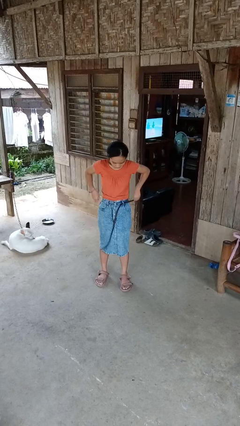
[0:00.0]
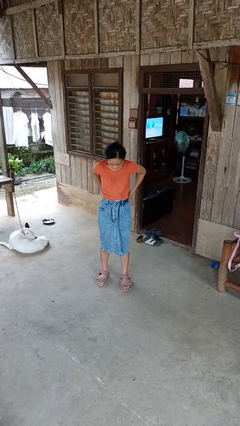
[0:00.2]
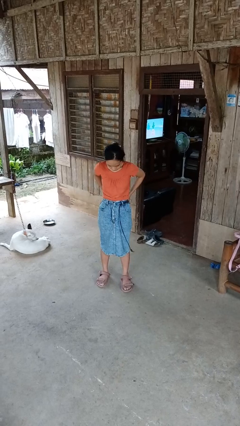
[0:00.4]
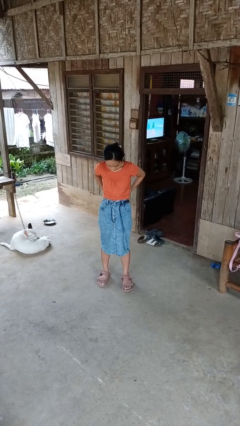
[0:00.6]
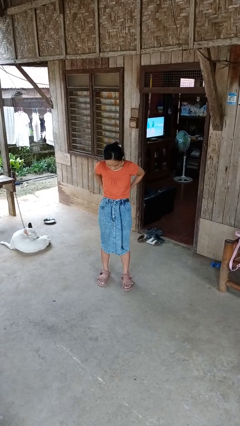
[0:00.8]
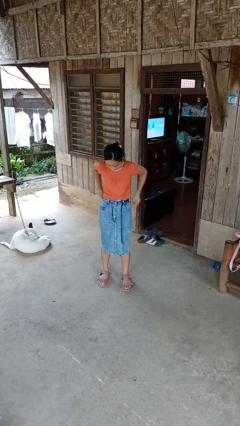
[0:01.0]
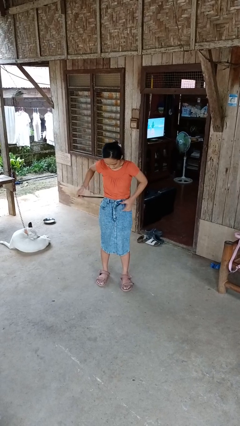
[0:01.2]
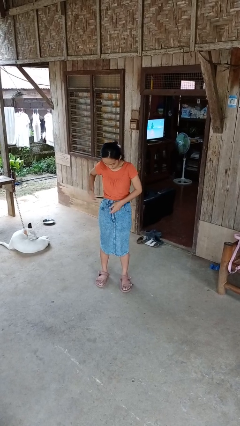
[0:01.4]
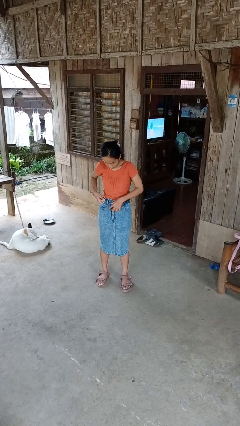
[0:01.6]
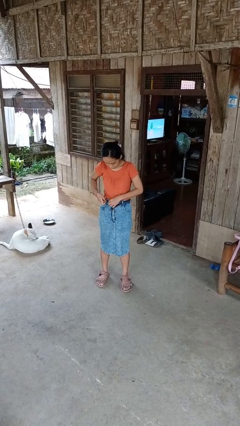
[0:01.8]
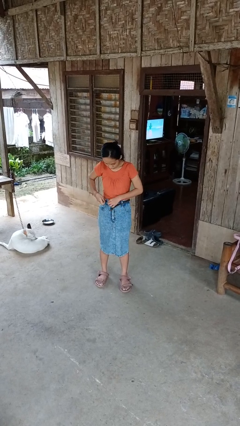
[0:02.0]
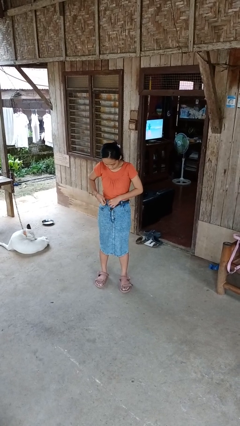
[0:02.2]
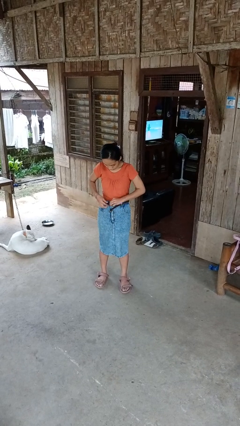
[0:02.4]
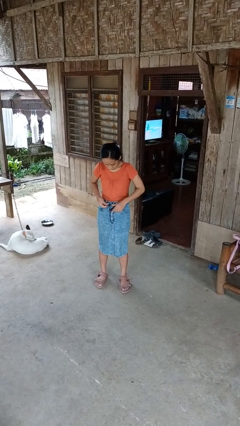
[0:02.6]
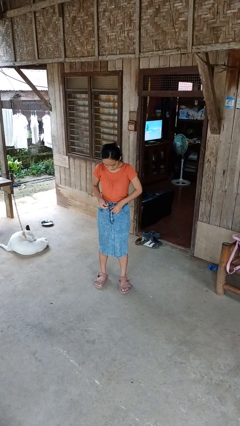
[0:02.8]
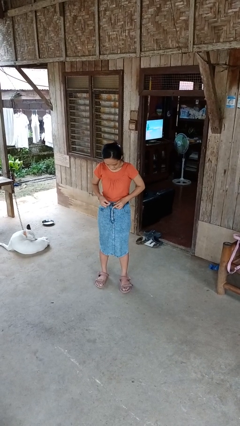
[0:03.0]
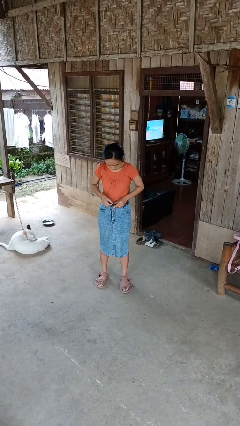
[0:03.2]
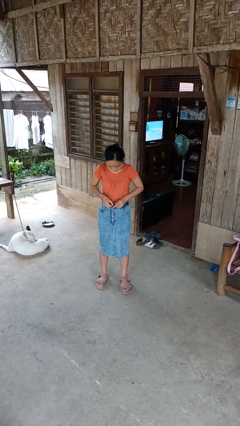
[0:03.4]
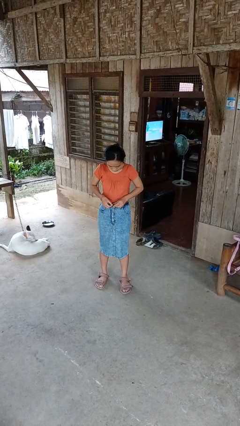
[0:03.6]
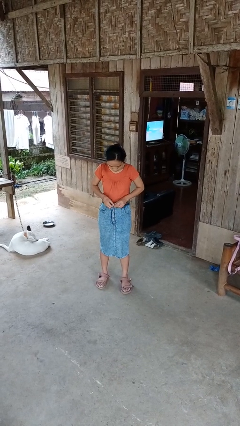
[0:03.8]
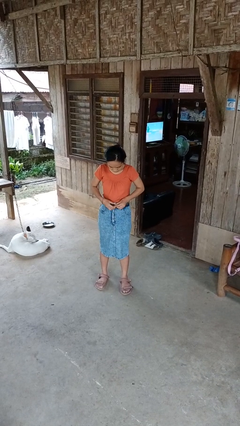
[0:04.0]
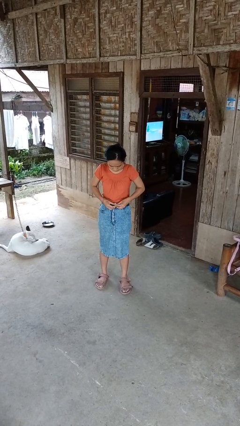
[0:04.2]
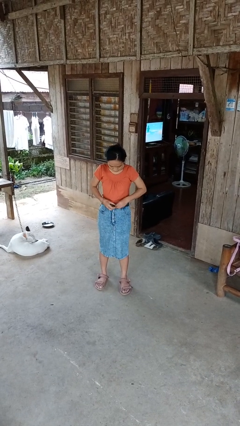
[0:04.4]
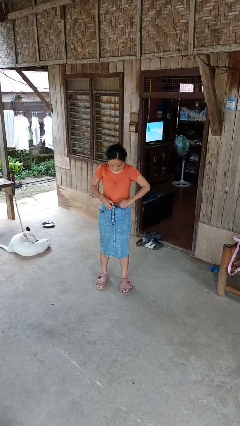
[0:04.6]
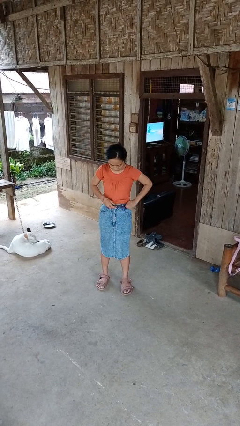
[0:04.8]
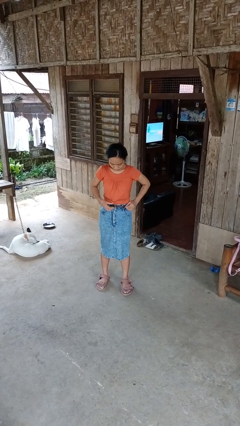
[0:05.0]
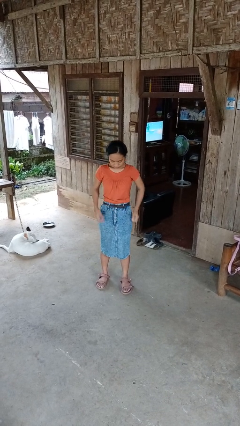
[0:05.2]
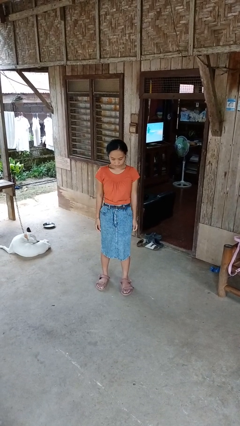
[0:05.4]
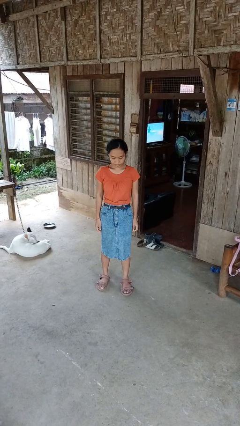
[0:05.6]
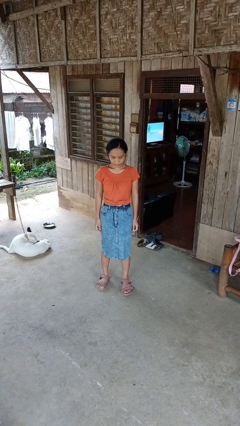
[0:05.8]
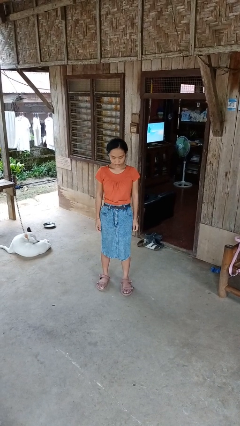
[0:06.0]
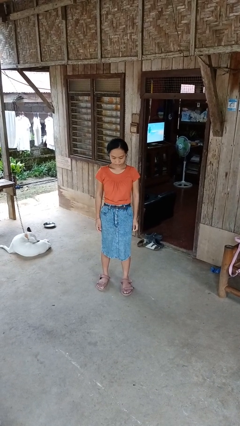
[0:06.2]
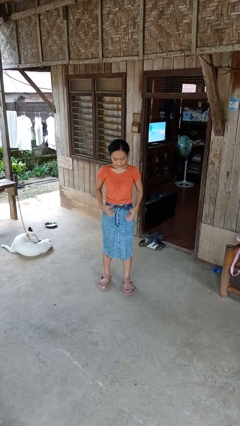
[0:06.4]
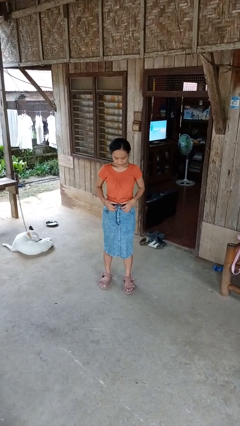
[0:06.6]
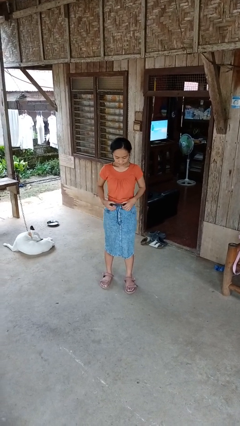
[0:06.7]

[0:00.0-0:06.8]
person puts on belt

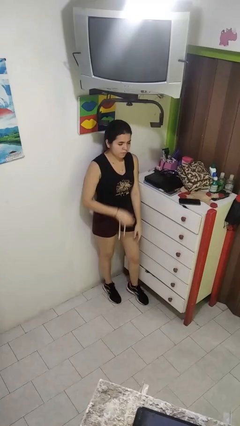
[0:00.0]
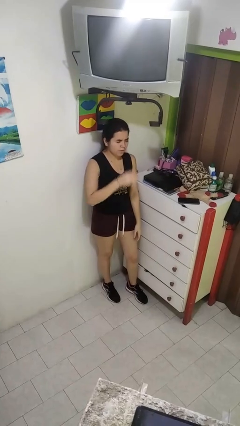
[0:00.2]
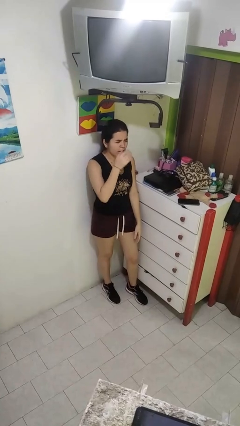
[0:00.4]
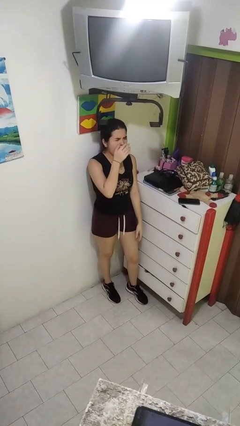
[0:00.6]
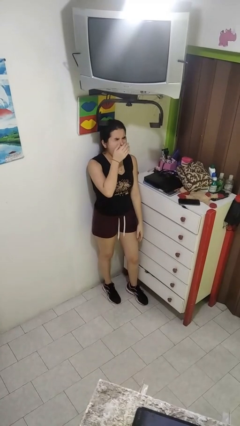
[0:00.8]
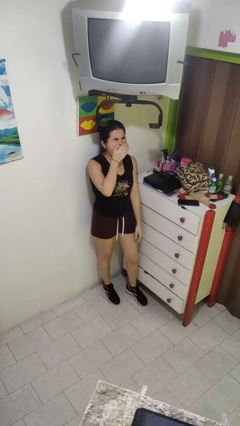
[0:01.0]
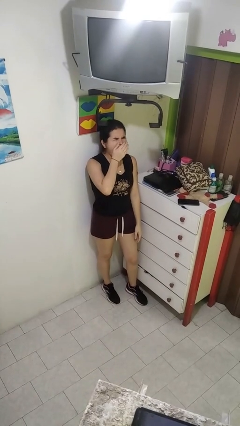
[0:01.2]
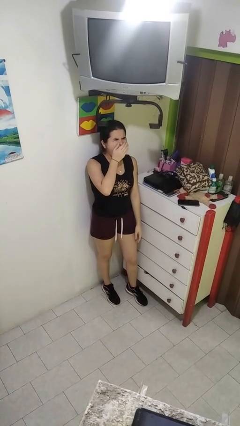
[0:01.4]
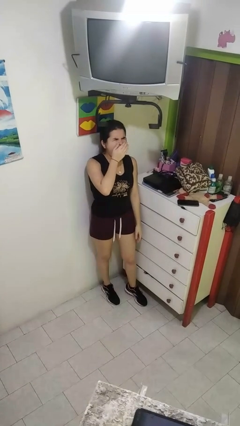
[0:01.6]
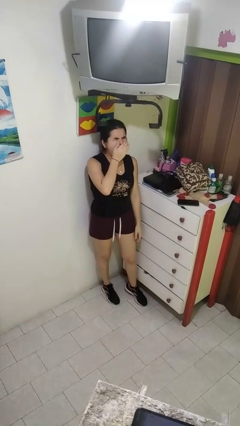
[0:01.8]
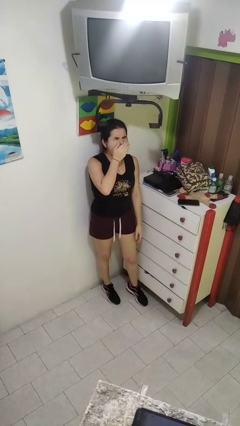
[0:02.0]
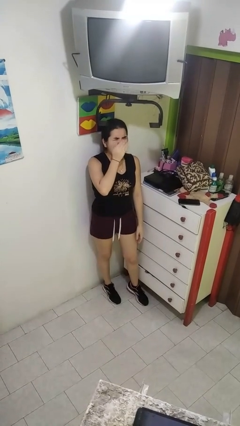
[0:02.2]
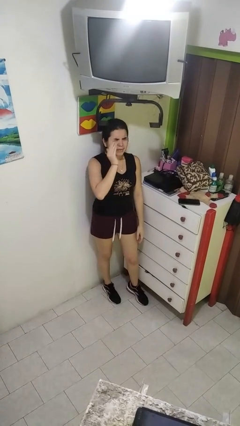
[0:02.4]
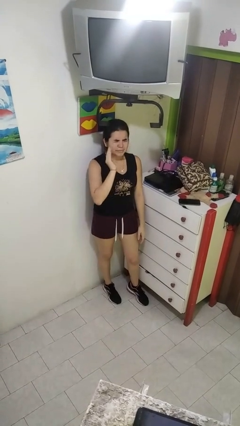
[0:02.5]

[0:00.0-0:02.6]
person yawns

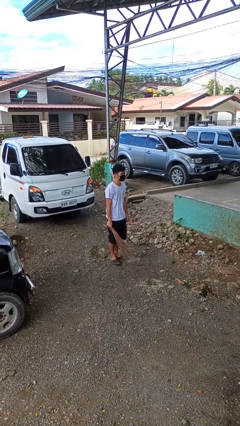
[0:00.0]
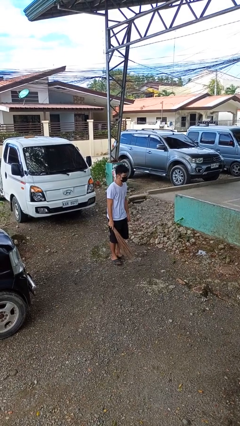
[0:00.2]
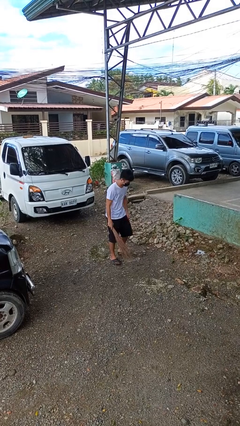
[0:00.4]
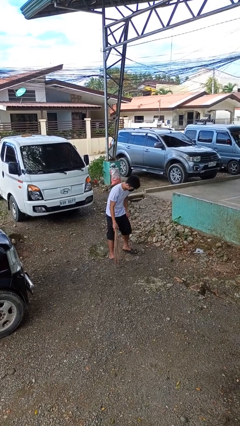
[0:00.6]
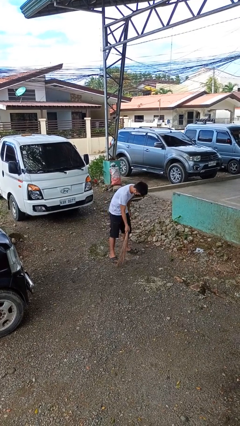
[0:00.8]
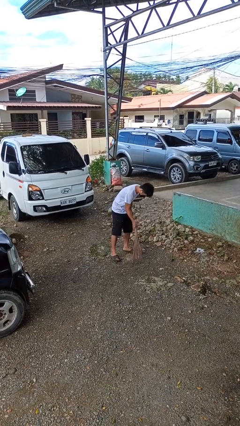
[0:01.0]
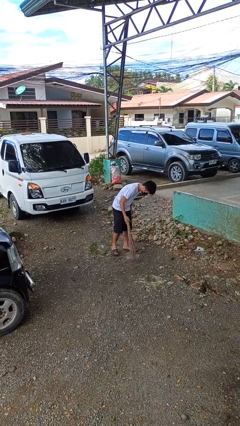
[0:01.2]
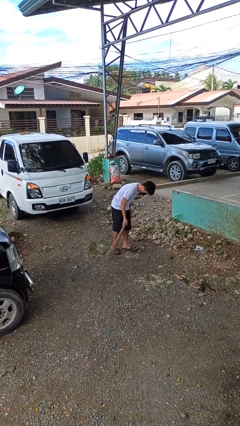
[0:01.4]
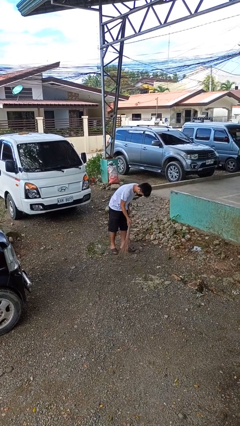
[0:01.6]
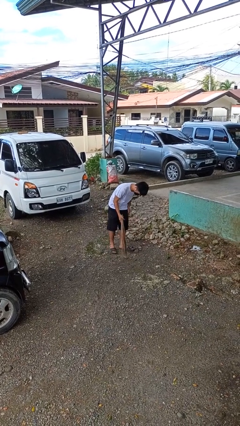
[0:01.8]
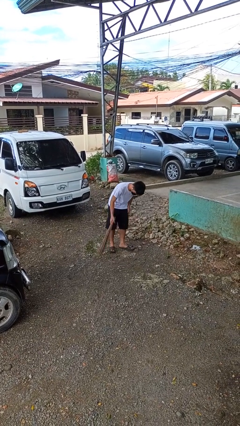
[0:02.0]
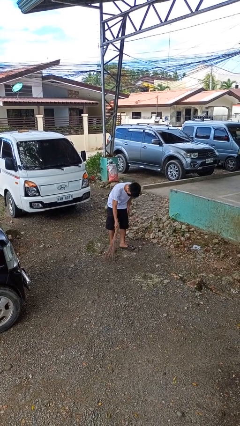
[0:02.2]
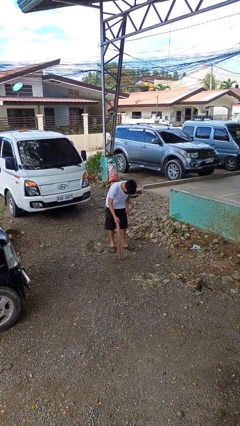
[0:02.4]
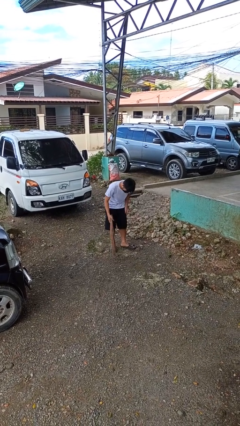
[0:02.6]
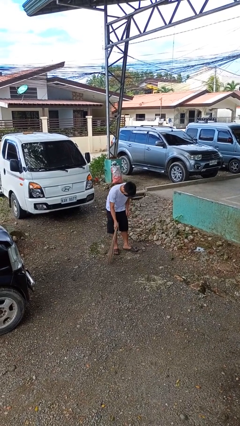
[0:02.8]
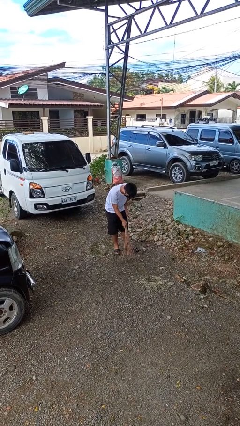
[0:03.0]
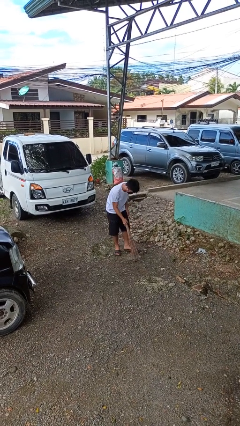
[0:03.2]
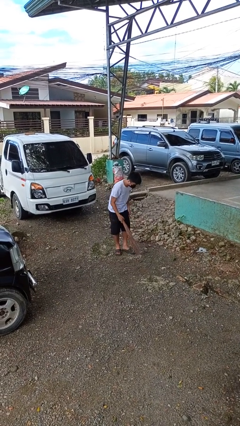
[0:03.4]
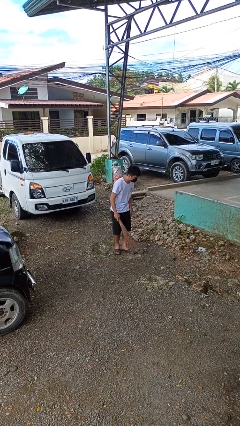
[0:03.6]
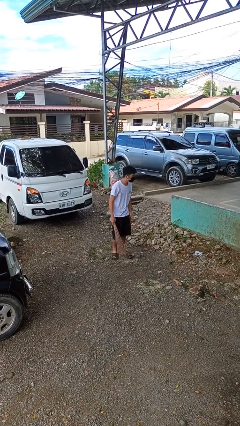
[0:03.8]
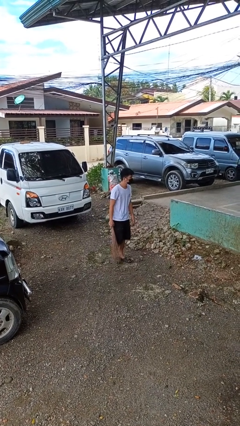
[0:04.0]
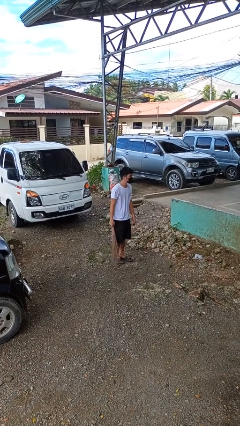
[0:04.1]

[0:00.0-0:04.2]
person sweeps floor

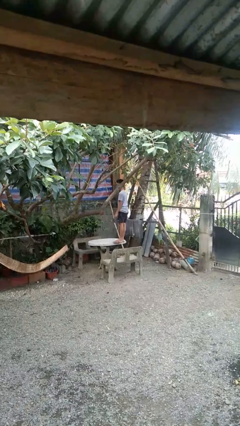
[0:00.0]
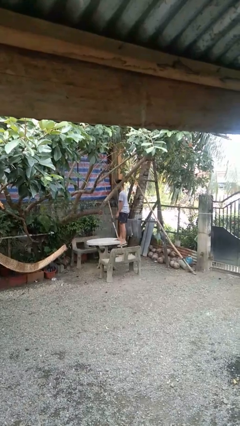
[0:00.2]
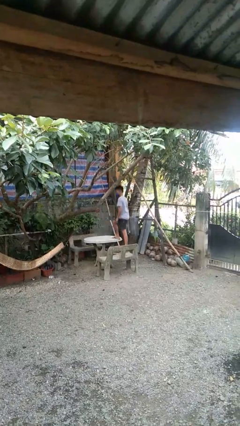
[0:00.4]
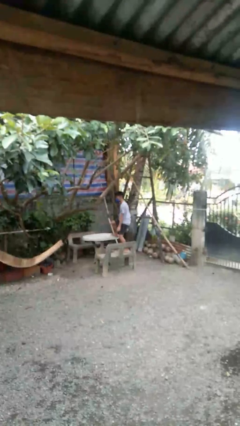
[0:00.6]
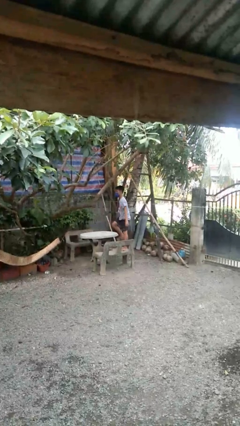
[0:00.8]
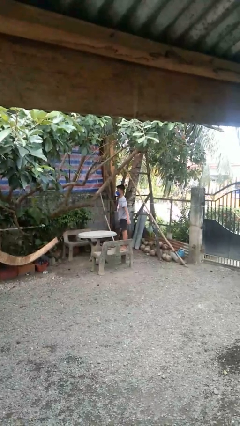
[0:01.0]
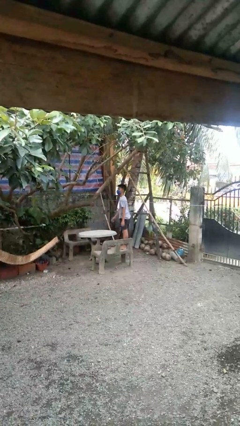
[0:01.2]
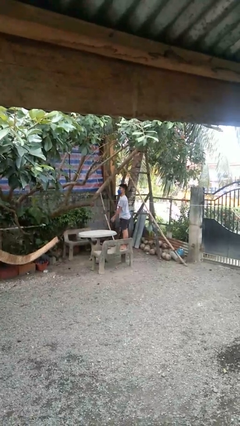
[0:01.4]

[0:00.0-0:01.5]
person climbs off table

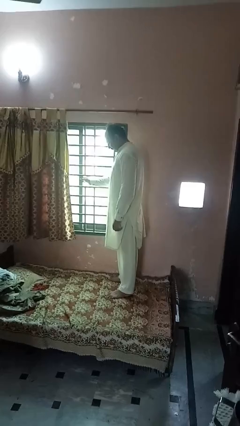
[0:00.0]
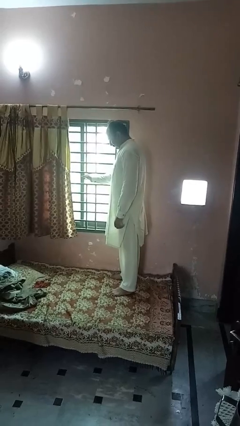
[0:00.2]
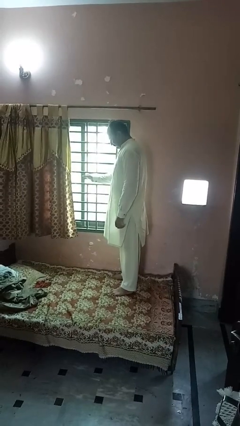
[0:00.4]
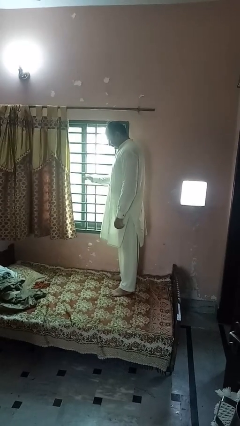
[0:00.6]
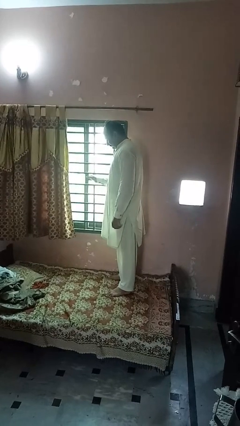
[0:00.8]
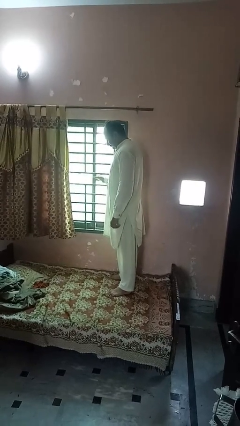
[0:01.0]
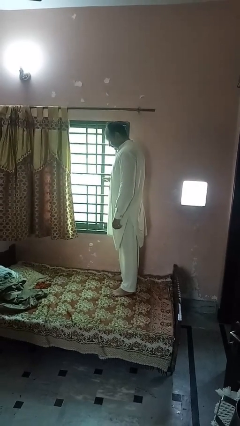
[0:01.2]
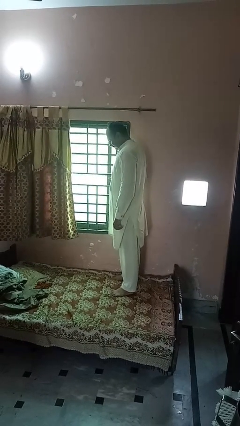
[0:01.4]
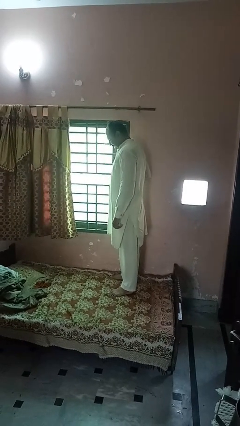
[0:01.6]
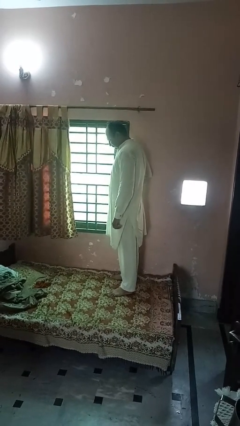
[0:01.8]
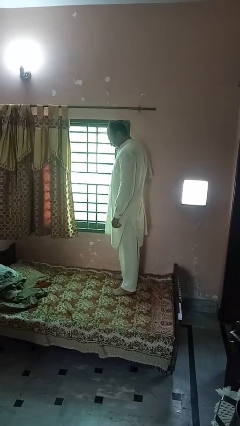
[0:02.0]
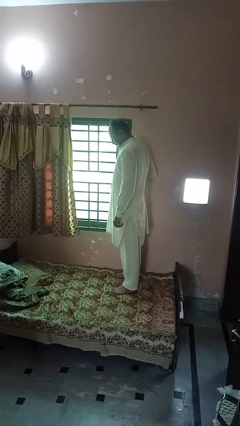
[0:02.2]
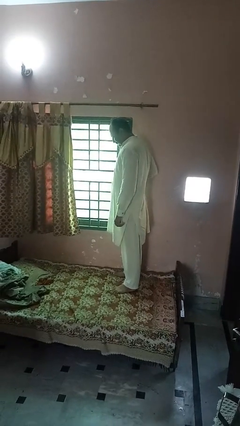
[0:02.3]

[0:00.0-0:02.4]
person closes home window

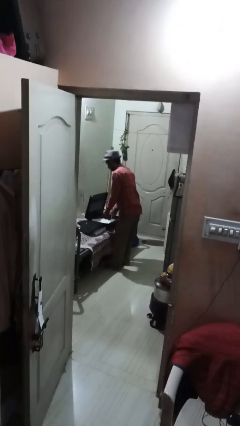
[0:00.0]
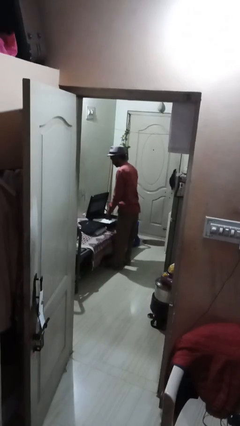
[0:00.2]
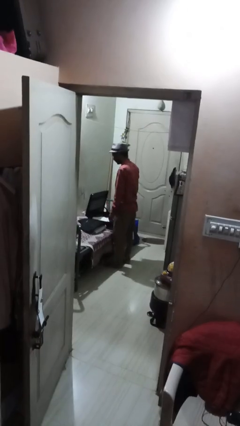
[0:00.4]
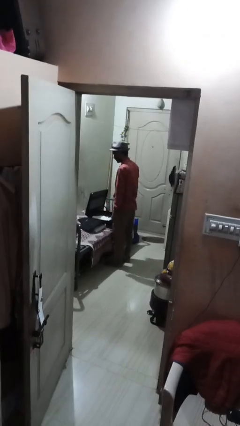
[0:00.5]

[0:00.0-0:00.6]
person loads clothes into suitcase
